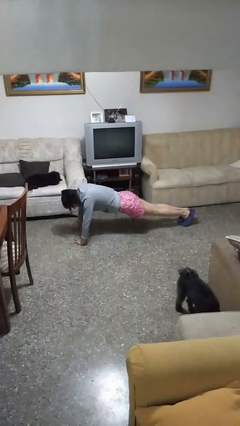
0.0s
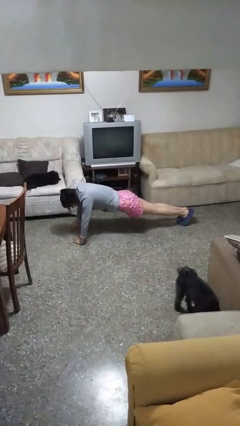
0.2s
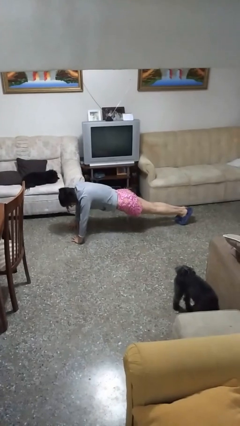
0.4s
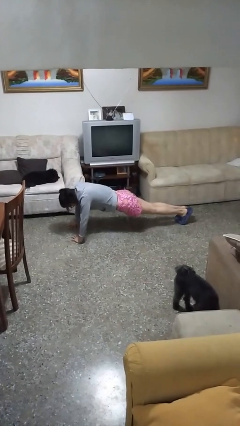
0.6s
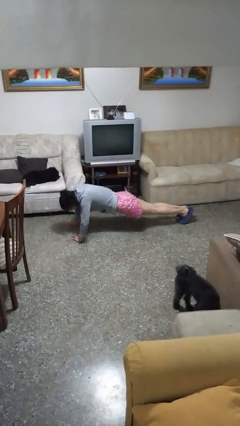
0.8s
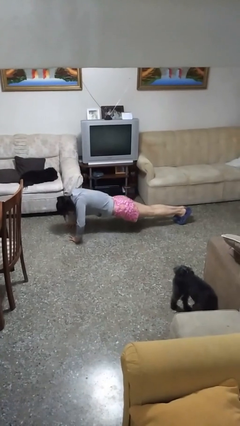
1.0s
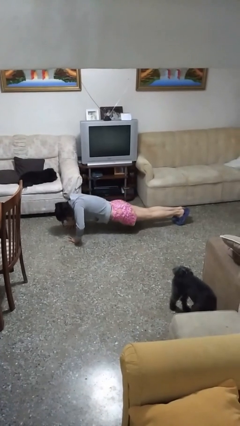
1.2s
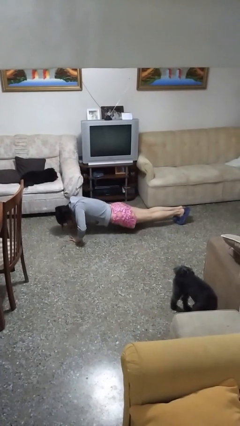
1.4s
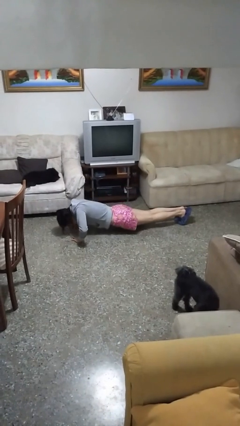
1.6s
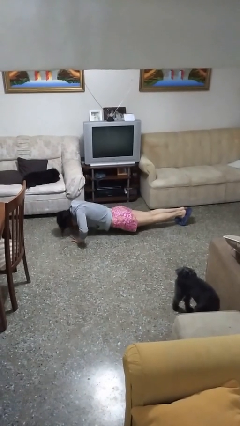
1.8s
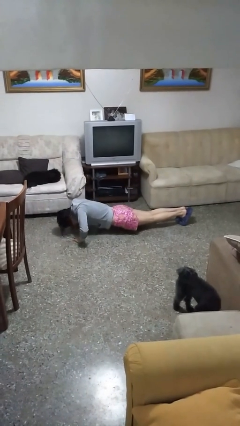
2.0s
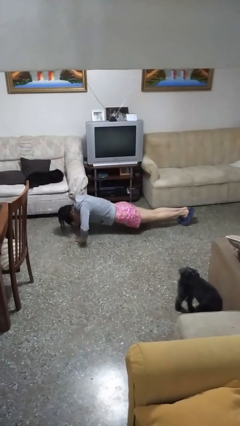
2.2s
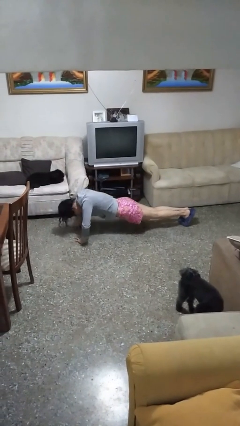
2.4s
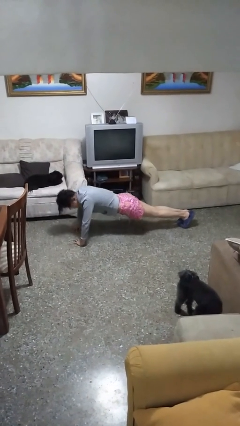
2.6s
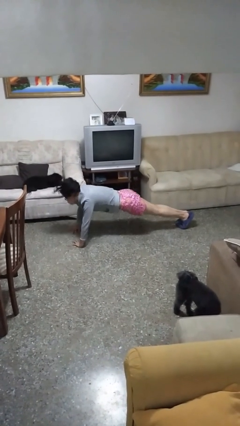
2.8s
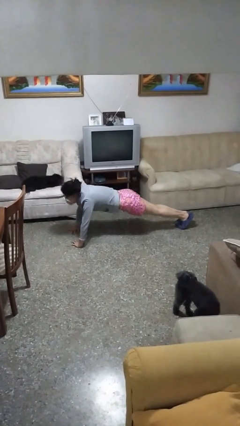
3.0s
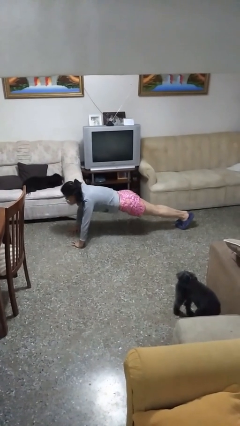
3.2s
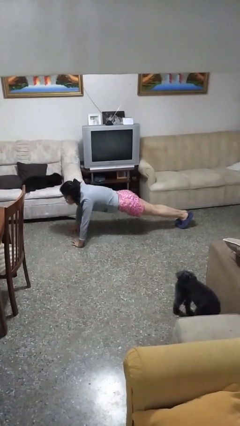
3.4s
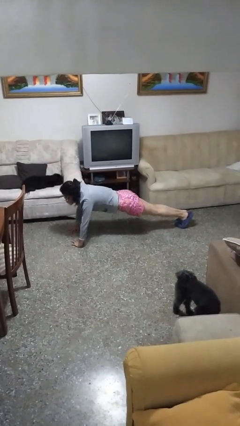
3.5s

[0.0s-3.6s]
person exercises with pushup

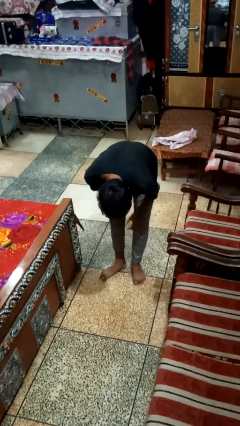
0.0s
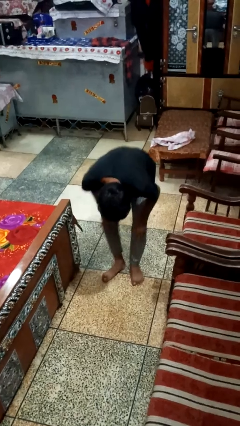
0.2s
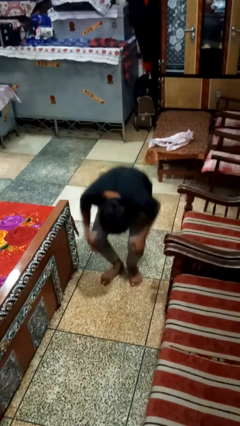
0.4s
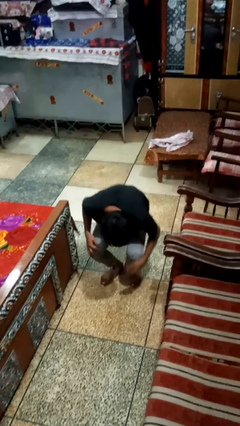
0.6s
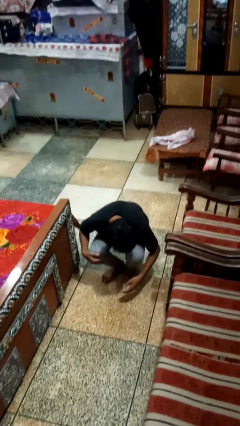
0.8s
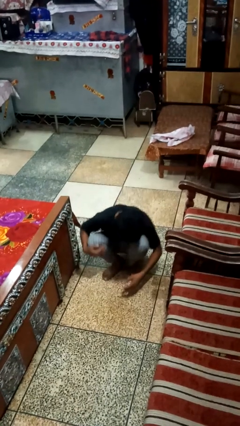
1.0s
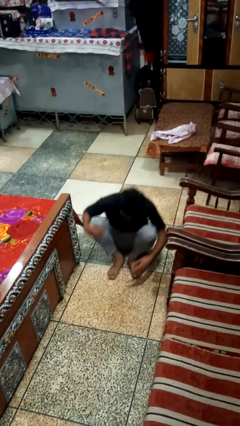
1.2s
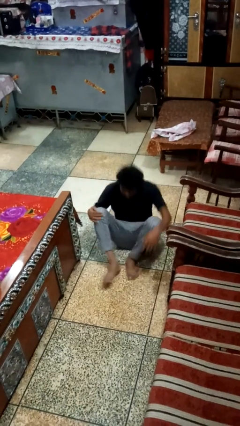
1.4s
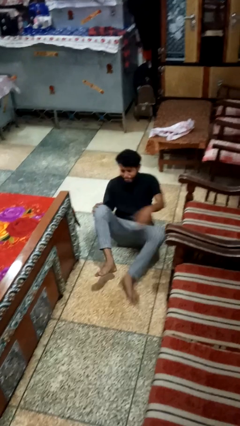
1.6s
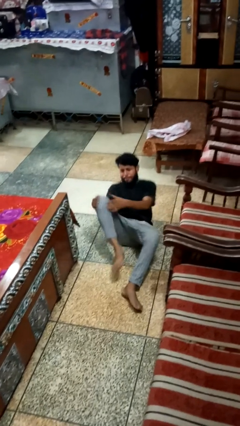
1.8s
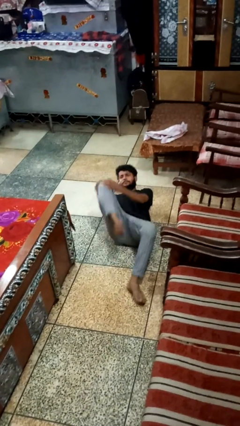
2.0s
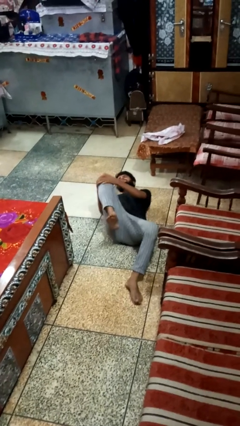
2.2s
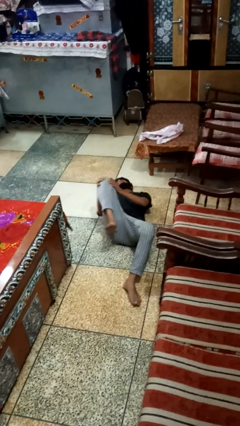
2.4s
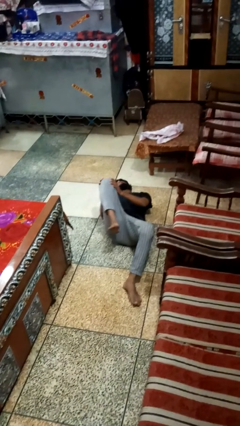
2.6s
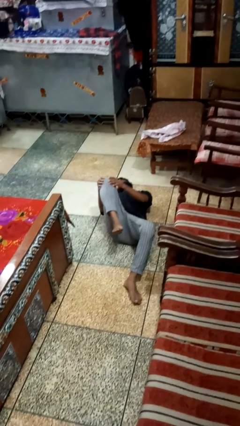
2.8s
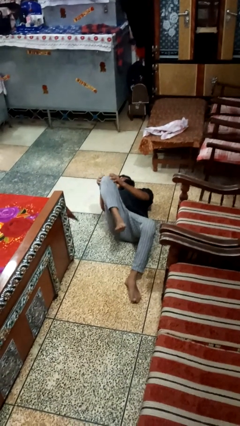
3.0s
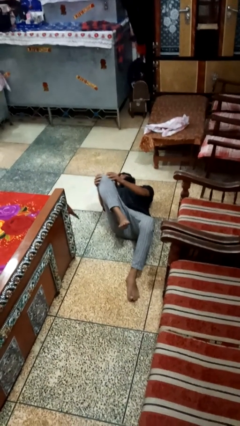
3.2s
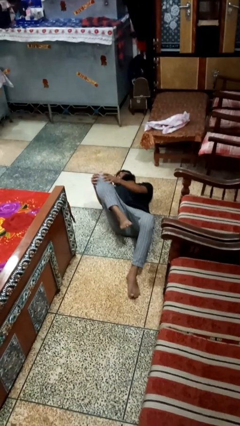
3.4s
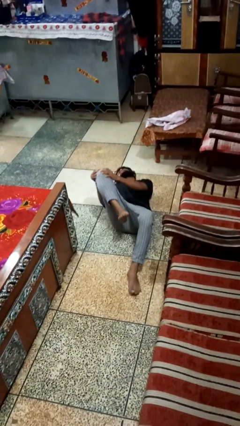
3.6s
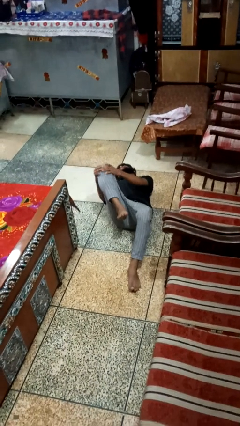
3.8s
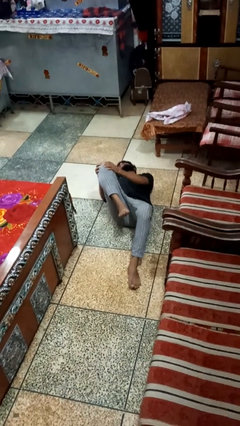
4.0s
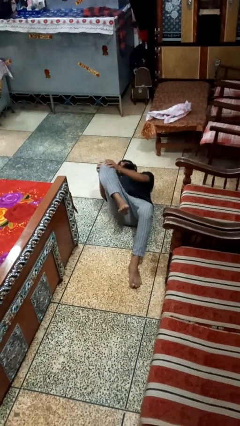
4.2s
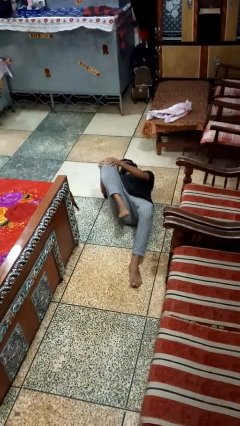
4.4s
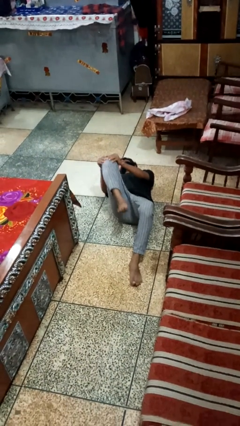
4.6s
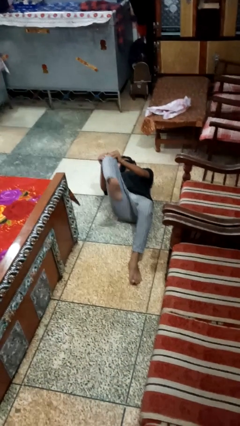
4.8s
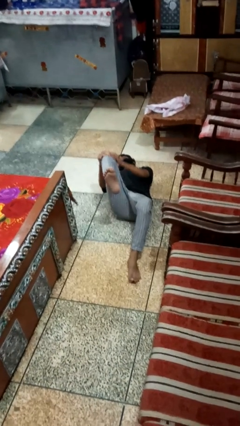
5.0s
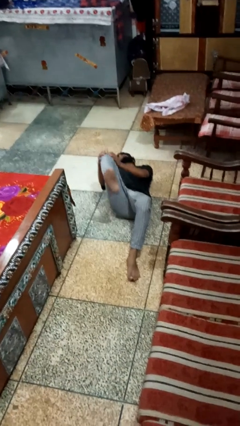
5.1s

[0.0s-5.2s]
person lies down on floor

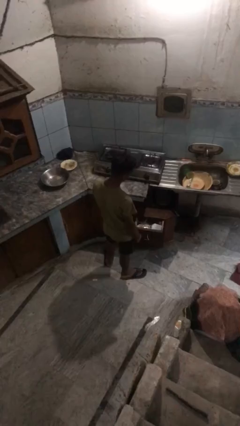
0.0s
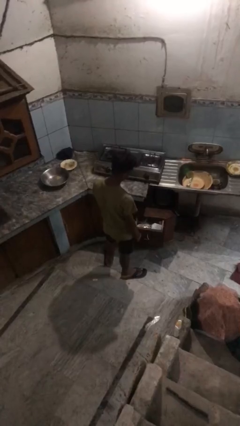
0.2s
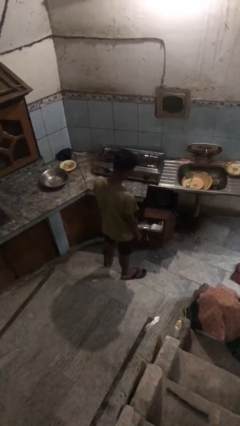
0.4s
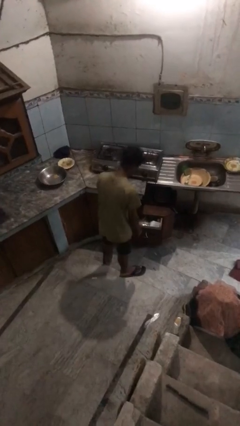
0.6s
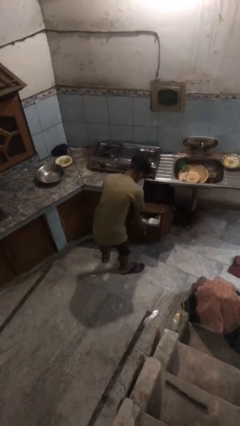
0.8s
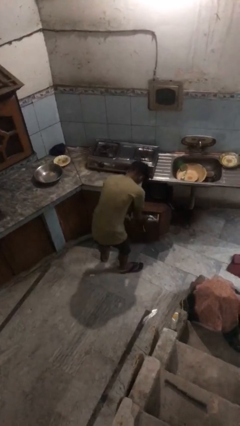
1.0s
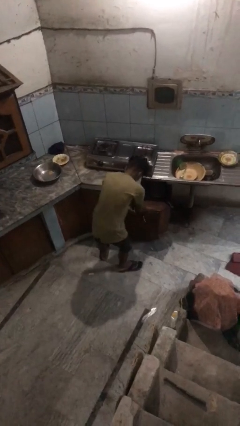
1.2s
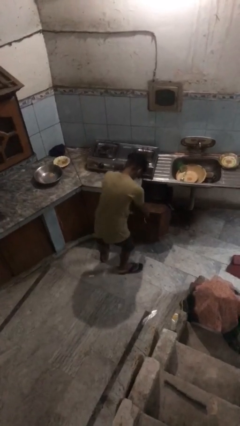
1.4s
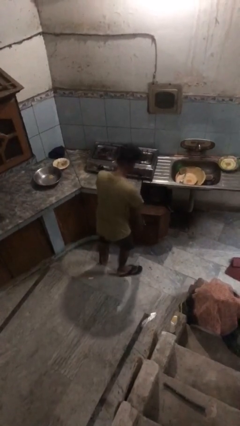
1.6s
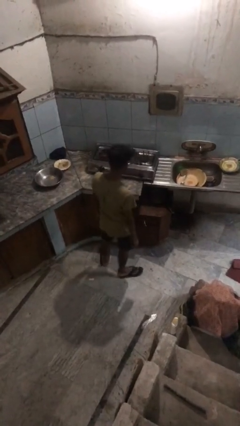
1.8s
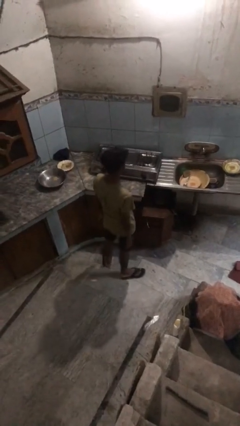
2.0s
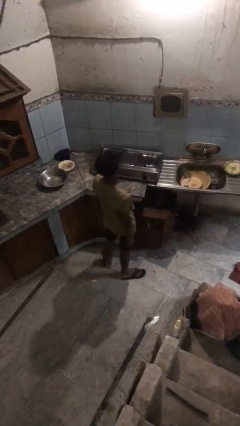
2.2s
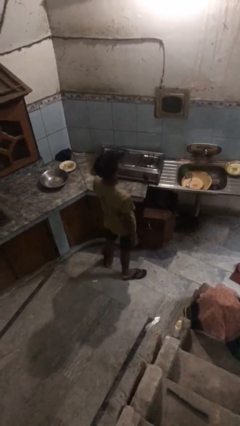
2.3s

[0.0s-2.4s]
person closes kitchen drawer

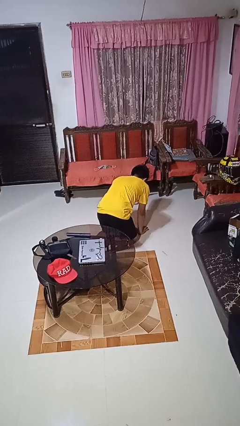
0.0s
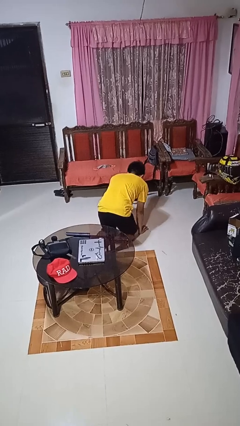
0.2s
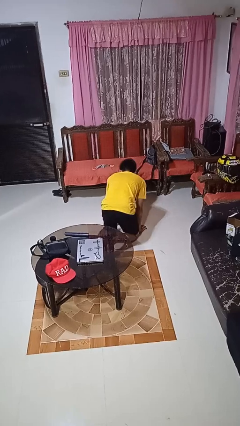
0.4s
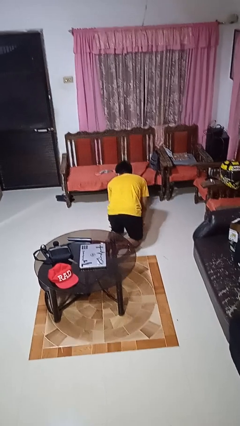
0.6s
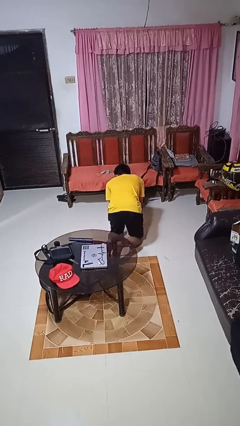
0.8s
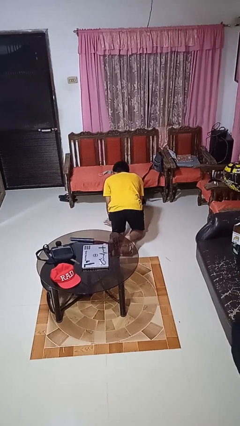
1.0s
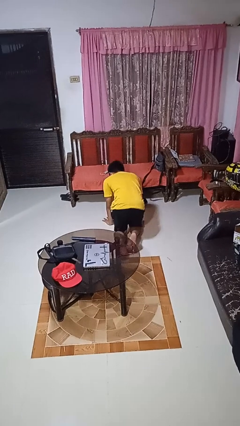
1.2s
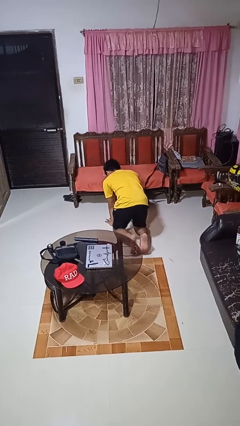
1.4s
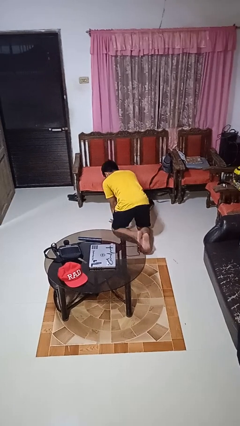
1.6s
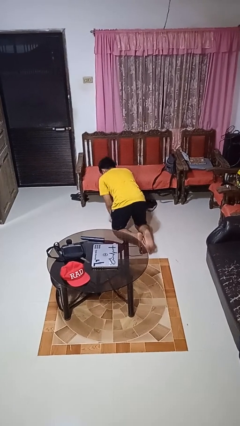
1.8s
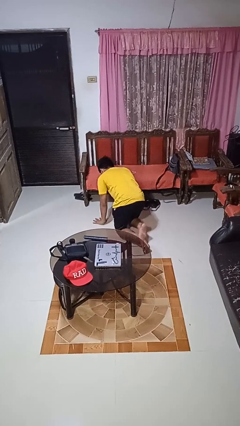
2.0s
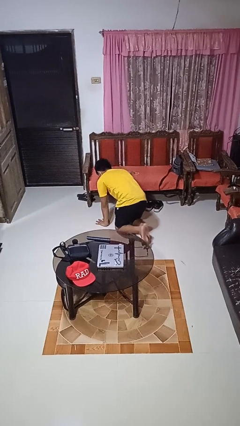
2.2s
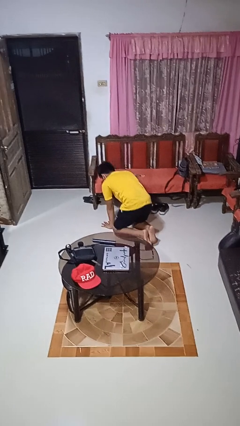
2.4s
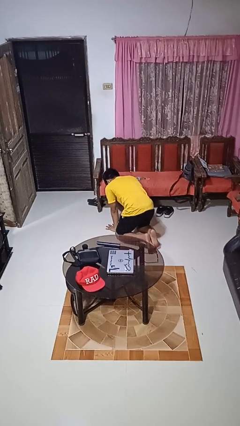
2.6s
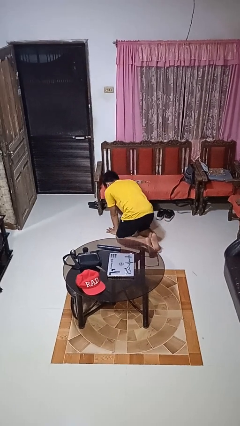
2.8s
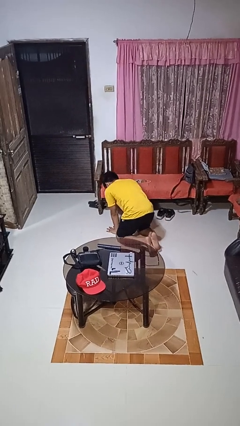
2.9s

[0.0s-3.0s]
person crawls

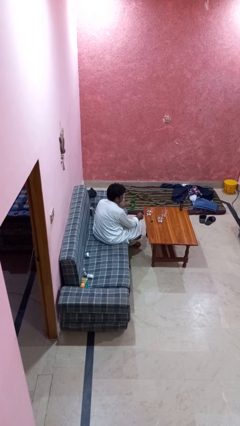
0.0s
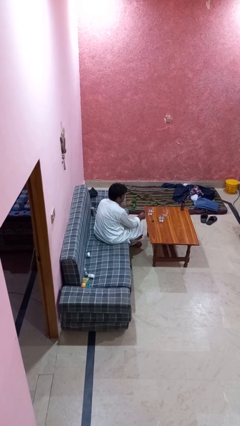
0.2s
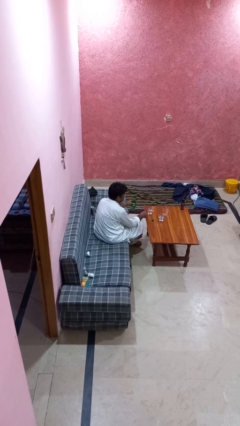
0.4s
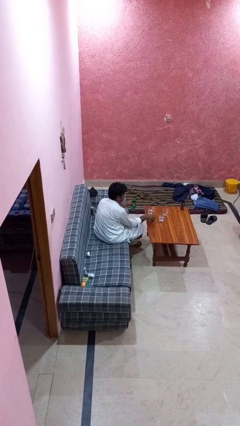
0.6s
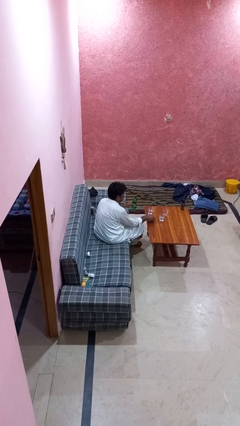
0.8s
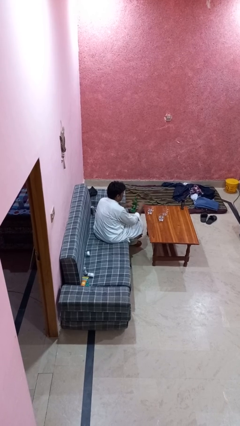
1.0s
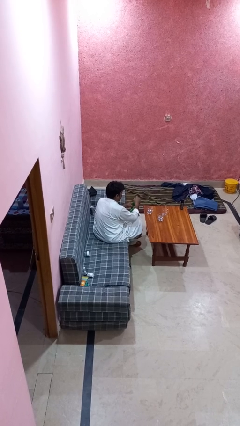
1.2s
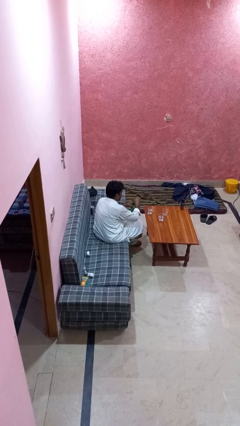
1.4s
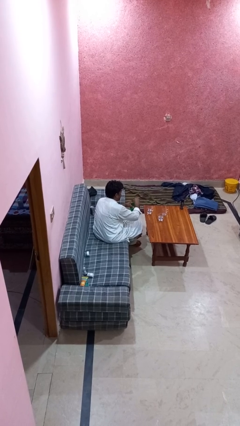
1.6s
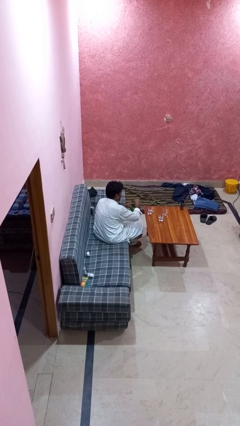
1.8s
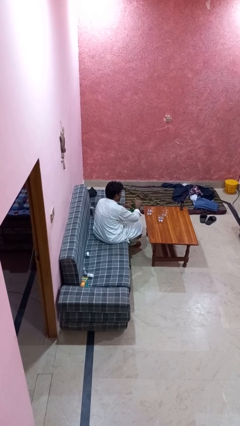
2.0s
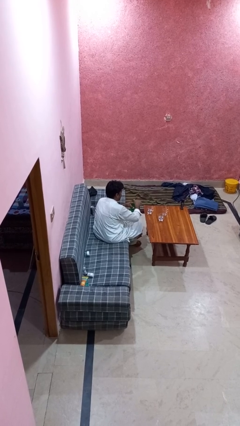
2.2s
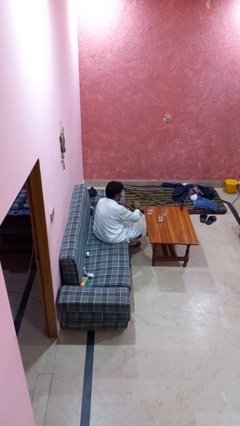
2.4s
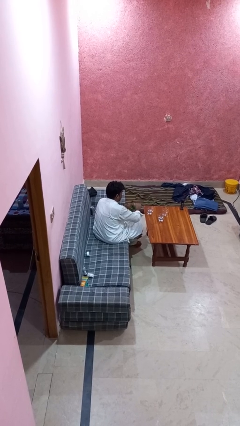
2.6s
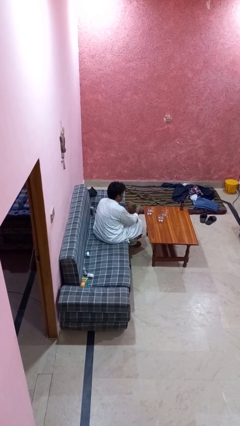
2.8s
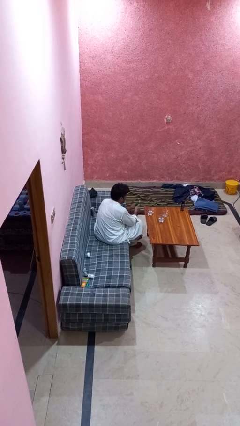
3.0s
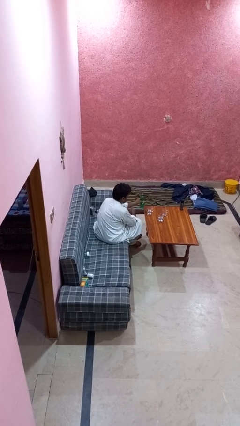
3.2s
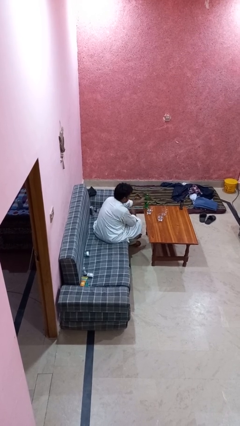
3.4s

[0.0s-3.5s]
person screws lid to bottle

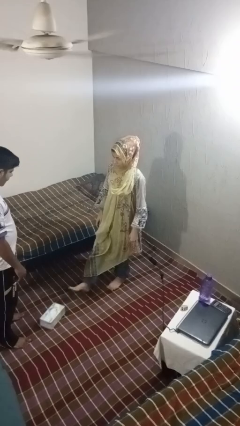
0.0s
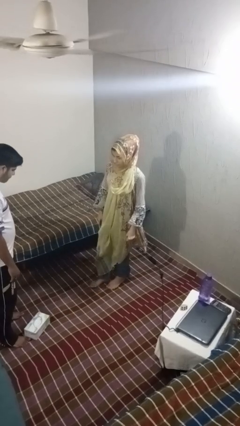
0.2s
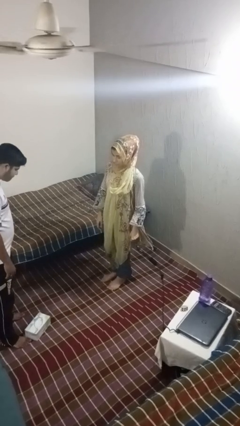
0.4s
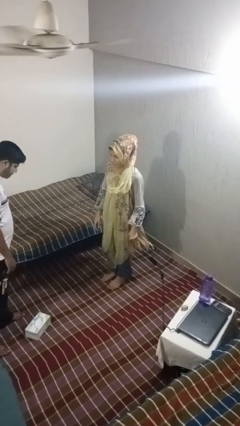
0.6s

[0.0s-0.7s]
person kicks object to person
